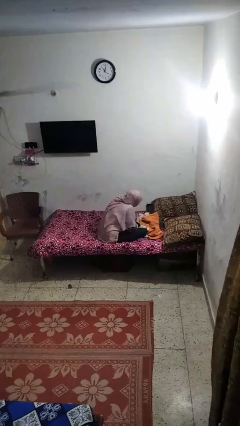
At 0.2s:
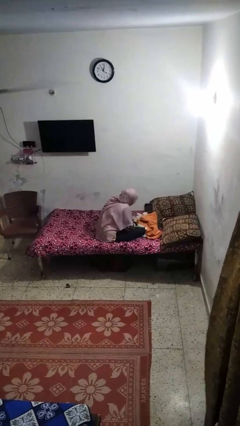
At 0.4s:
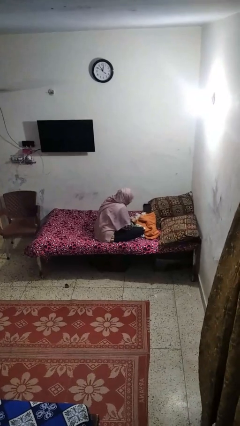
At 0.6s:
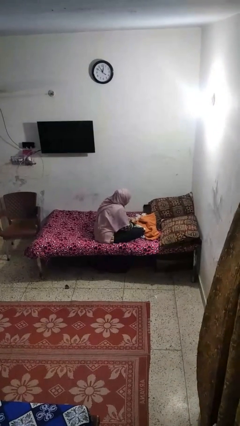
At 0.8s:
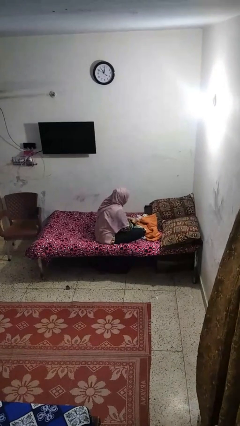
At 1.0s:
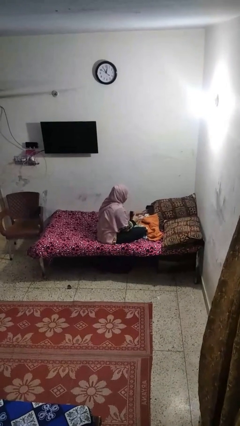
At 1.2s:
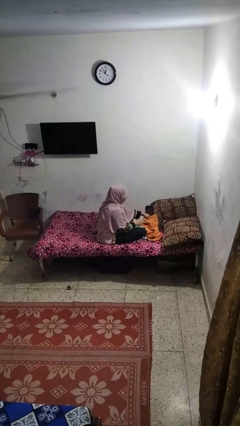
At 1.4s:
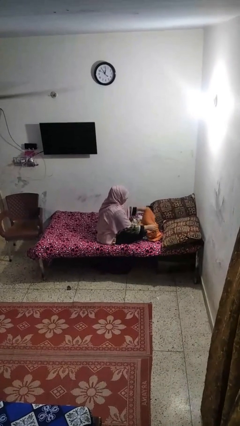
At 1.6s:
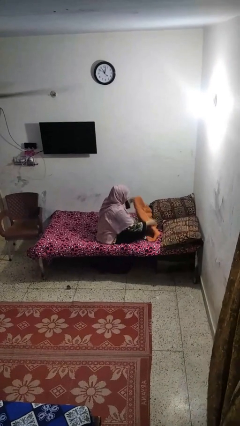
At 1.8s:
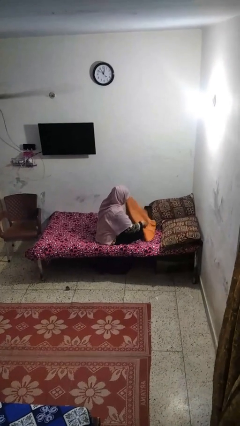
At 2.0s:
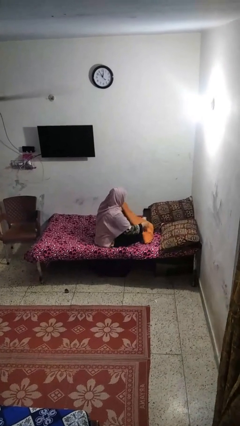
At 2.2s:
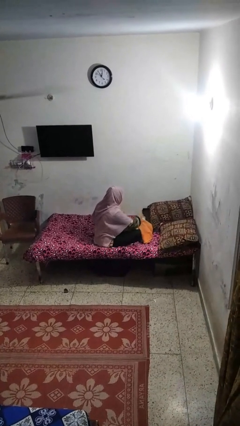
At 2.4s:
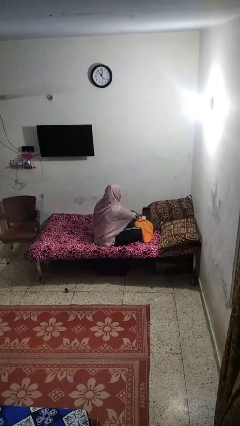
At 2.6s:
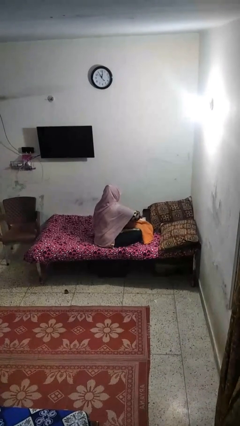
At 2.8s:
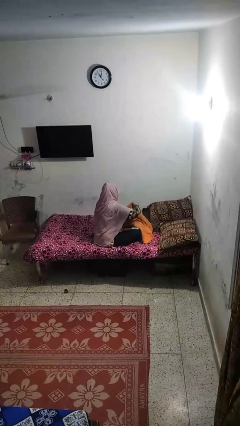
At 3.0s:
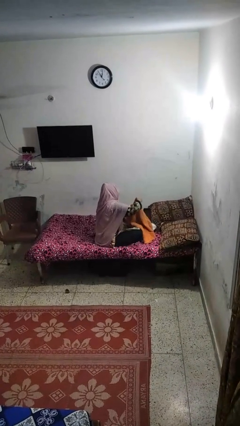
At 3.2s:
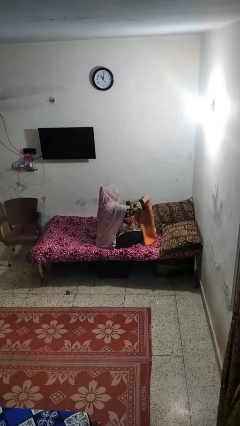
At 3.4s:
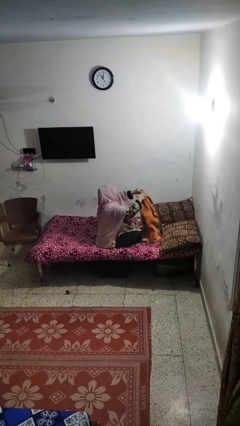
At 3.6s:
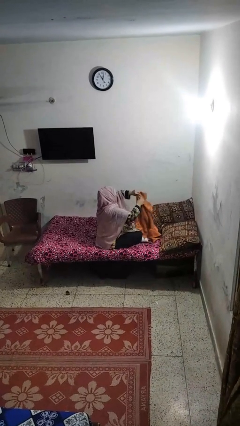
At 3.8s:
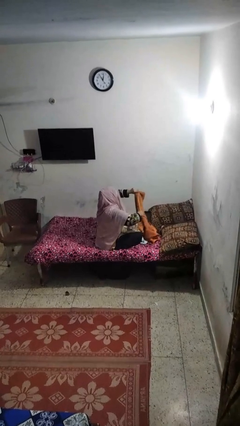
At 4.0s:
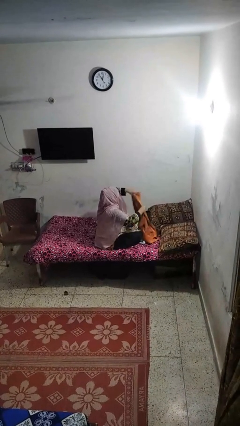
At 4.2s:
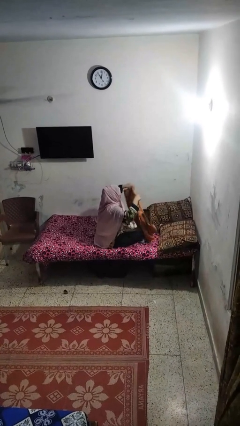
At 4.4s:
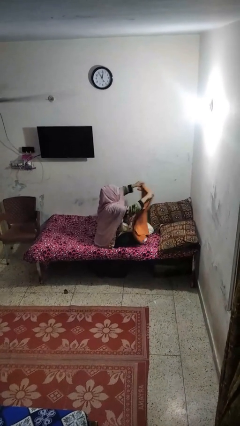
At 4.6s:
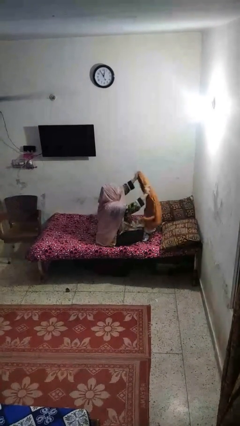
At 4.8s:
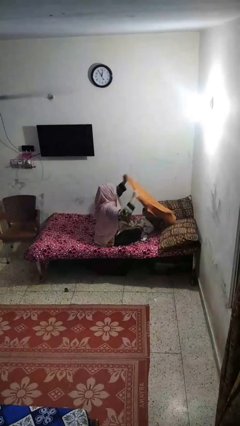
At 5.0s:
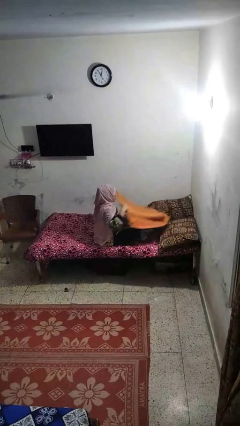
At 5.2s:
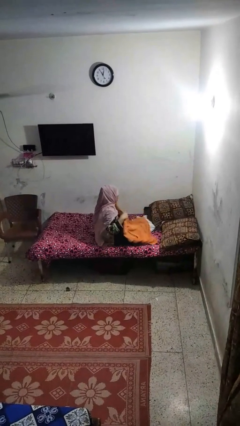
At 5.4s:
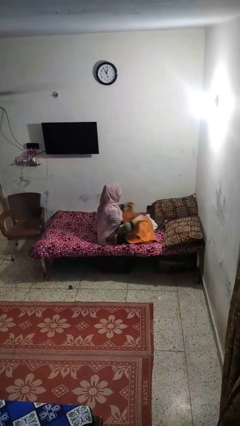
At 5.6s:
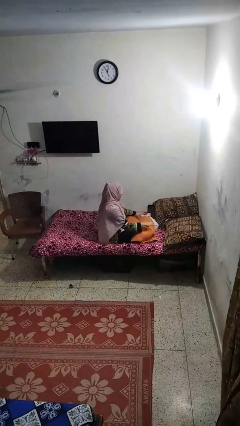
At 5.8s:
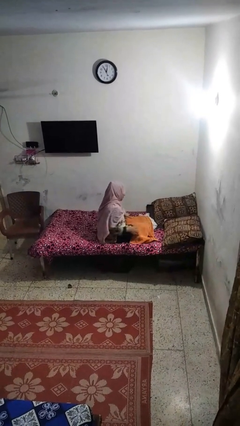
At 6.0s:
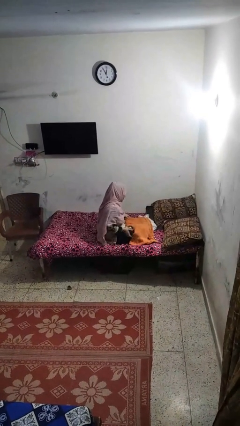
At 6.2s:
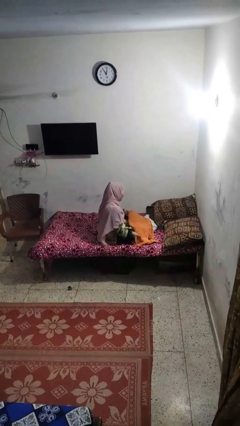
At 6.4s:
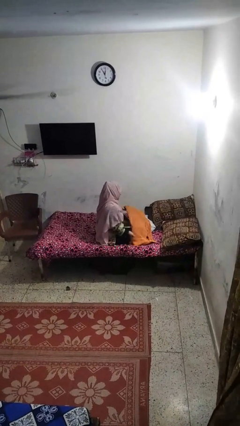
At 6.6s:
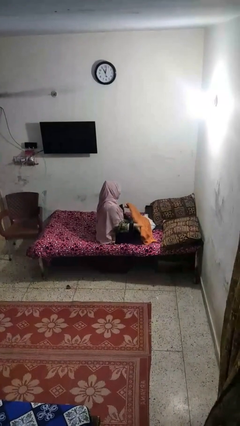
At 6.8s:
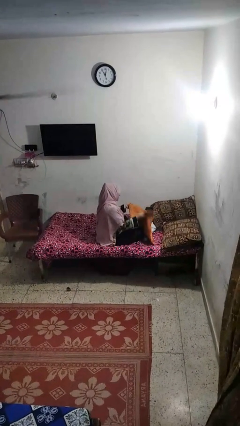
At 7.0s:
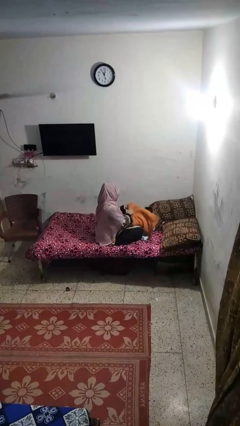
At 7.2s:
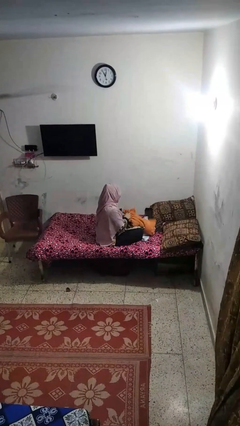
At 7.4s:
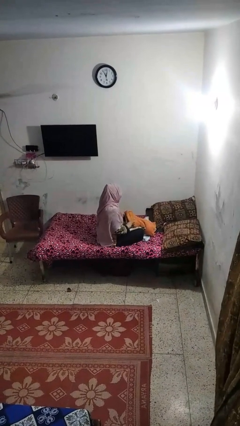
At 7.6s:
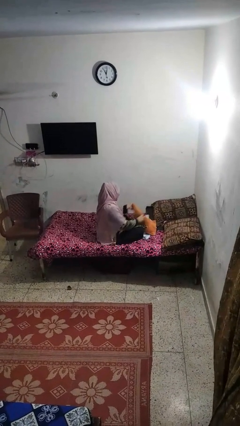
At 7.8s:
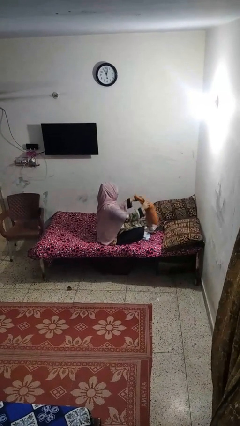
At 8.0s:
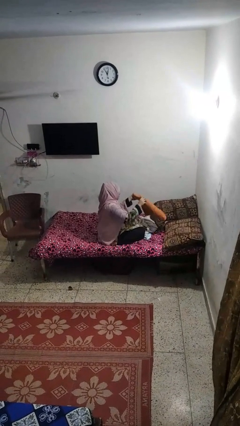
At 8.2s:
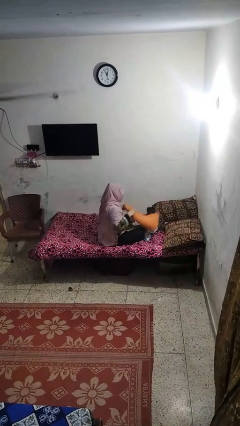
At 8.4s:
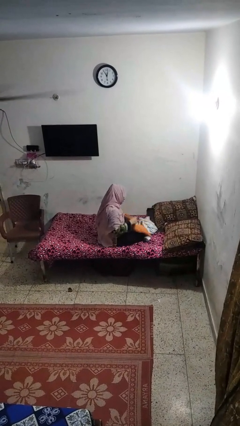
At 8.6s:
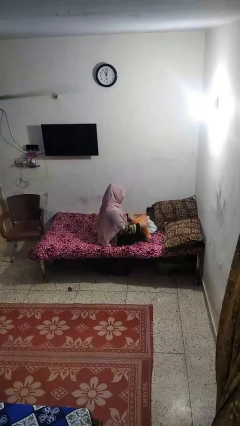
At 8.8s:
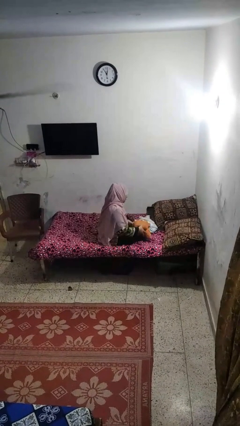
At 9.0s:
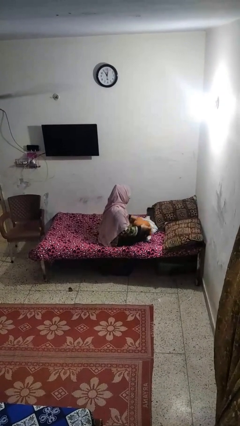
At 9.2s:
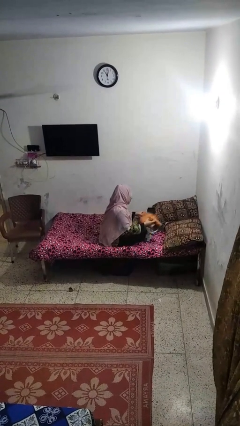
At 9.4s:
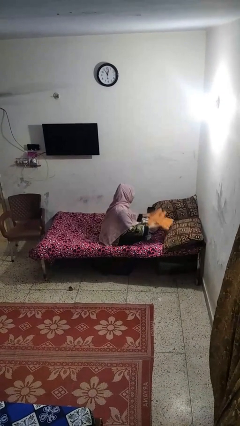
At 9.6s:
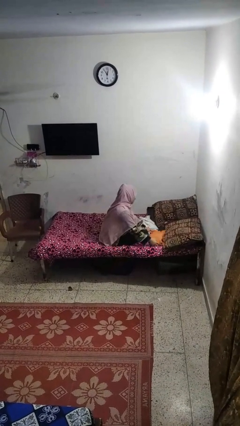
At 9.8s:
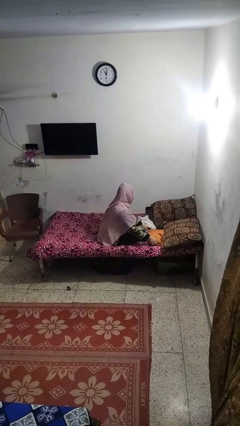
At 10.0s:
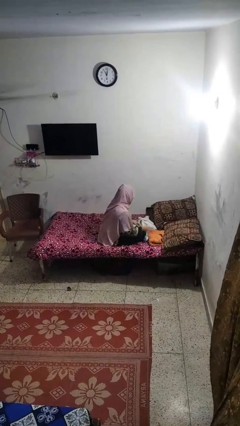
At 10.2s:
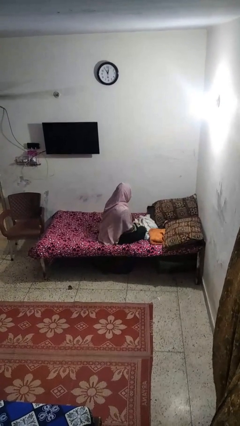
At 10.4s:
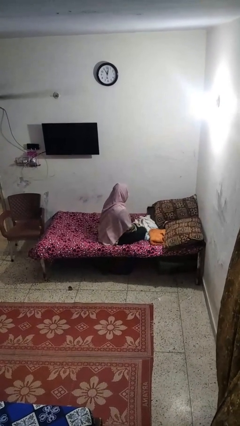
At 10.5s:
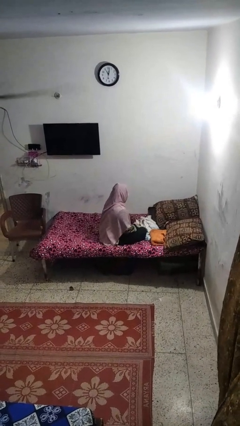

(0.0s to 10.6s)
person folds towel

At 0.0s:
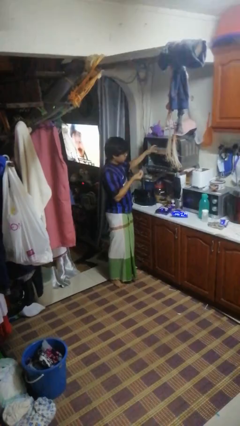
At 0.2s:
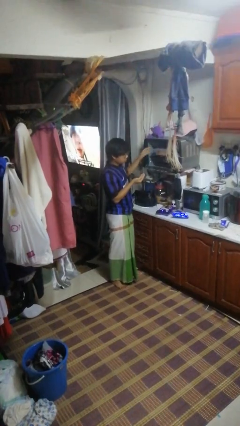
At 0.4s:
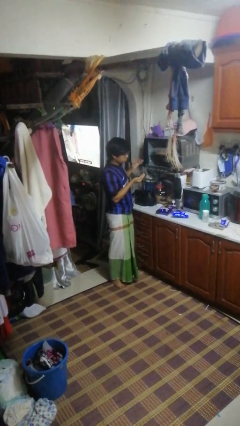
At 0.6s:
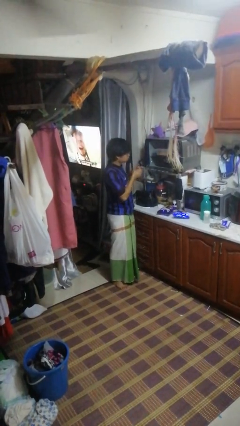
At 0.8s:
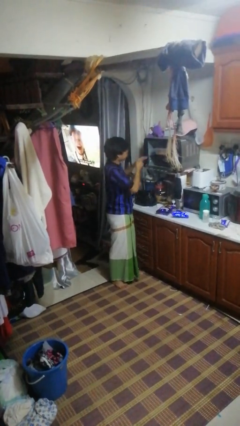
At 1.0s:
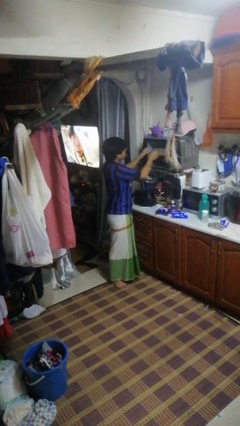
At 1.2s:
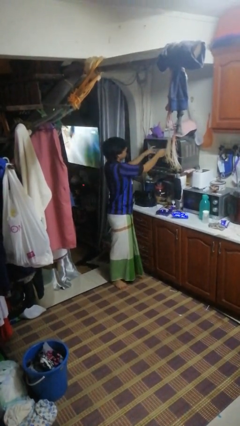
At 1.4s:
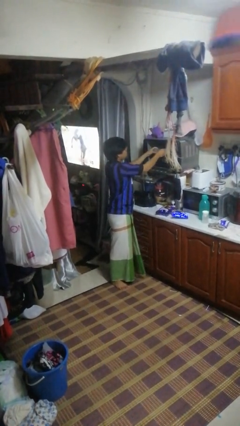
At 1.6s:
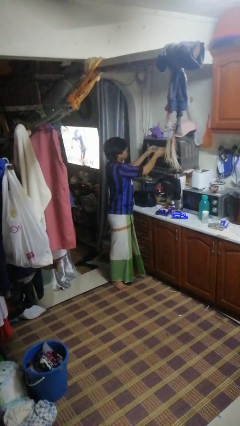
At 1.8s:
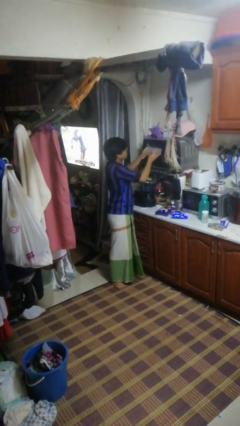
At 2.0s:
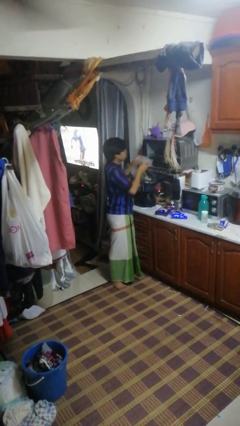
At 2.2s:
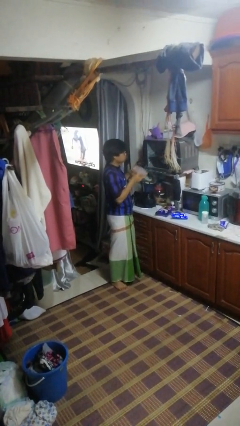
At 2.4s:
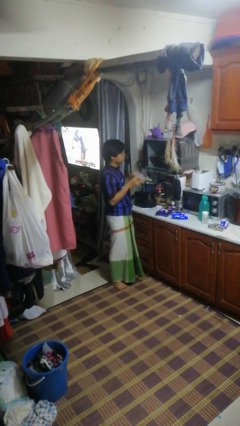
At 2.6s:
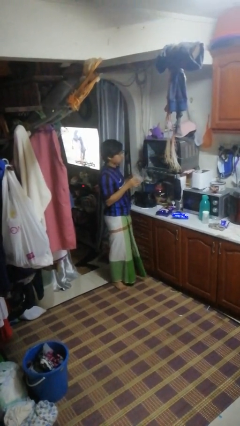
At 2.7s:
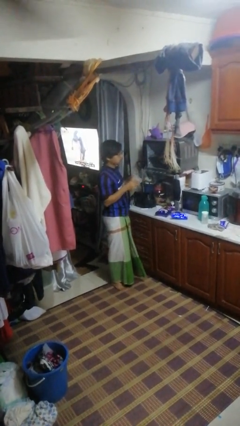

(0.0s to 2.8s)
person takes object from oven

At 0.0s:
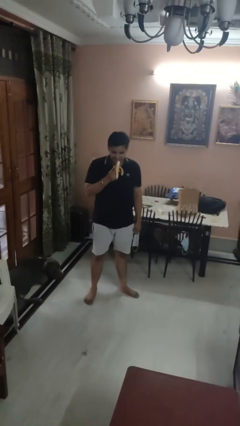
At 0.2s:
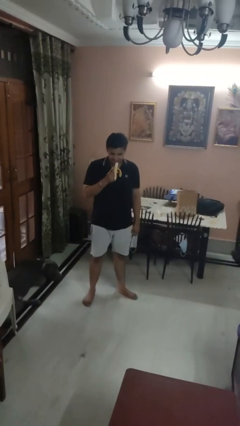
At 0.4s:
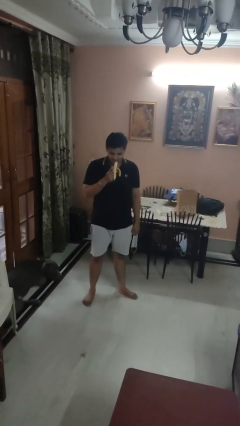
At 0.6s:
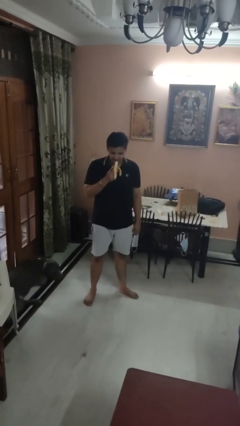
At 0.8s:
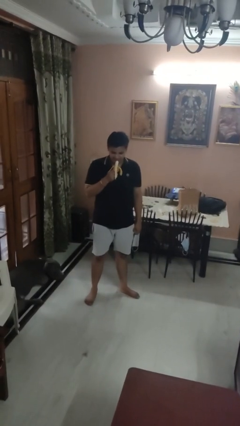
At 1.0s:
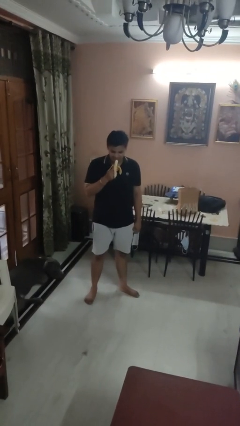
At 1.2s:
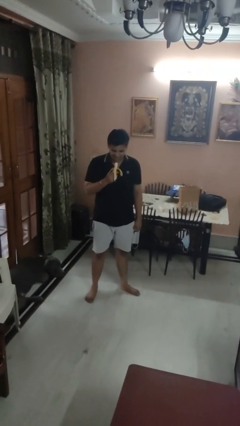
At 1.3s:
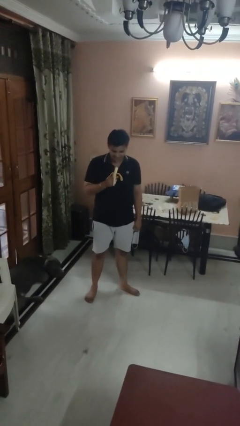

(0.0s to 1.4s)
person eats banana

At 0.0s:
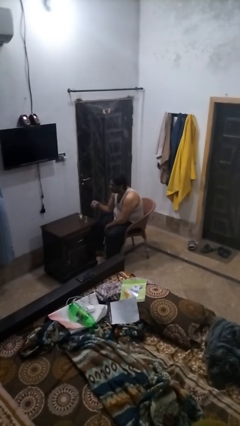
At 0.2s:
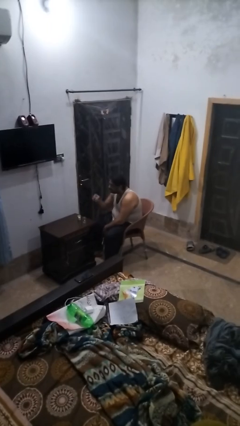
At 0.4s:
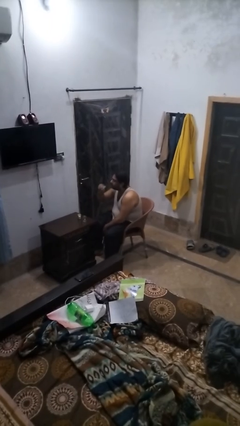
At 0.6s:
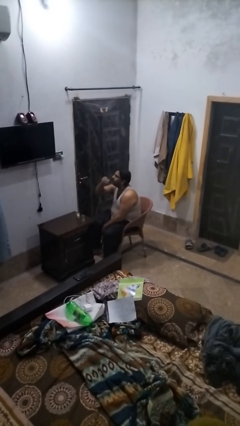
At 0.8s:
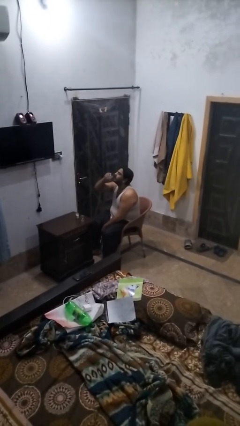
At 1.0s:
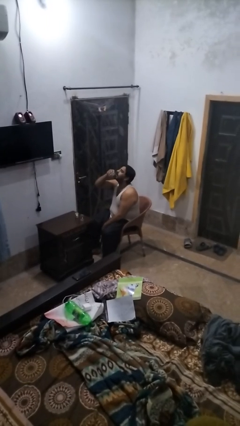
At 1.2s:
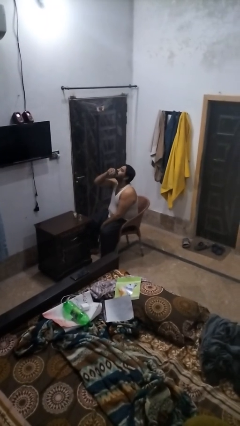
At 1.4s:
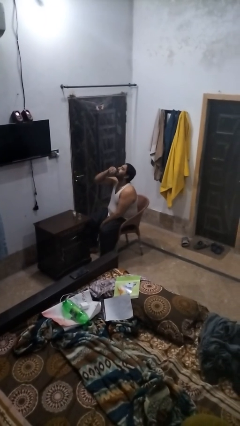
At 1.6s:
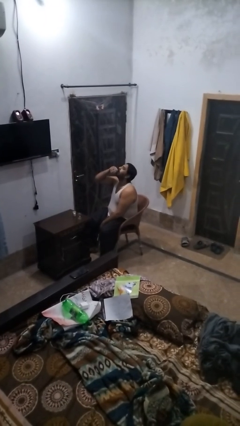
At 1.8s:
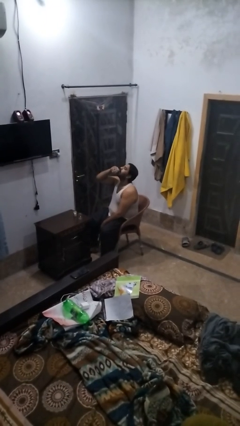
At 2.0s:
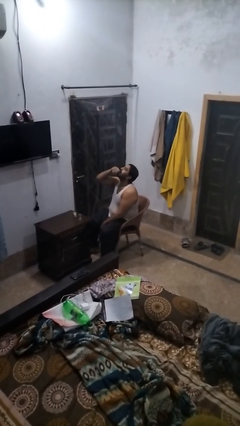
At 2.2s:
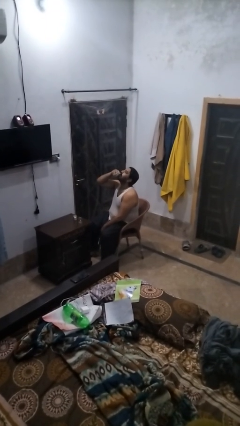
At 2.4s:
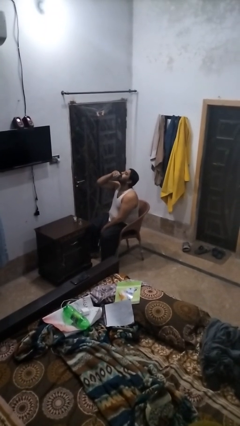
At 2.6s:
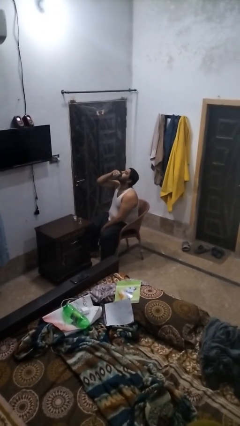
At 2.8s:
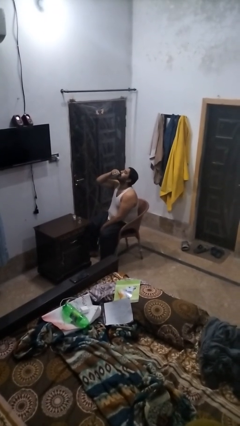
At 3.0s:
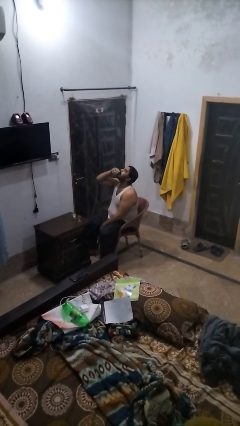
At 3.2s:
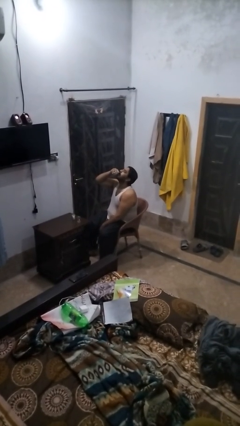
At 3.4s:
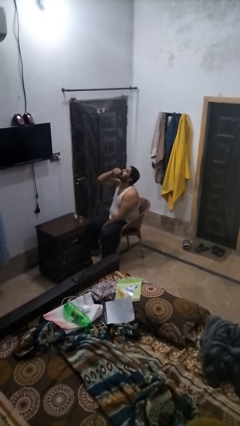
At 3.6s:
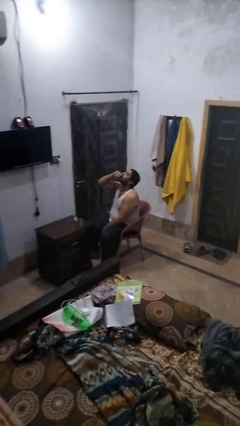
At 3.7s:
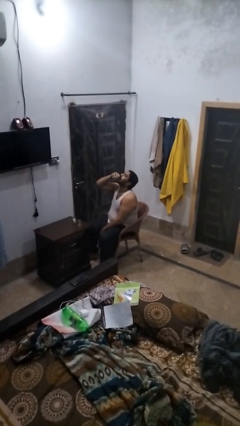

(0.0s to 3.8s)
person drinks from shotglass
